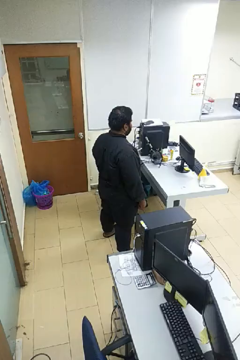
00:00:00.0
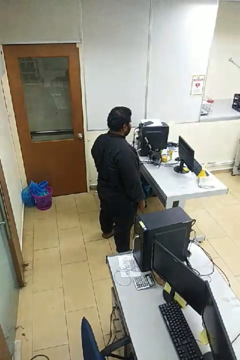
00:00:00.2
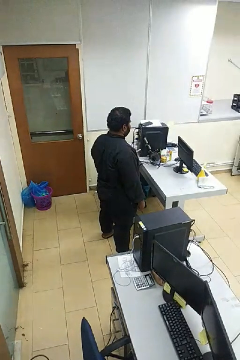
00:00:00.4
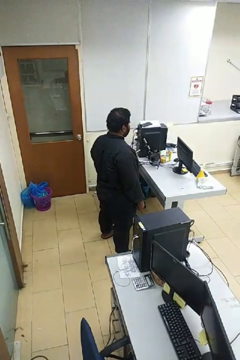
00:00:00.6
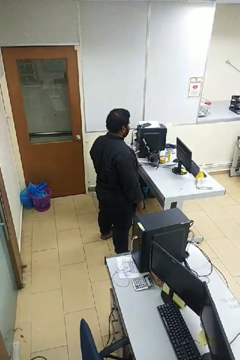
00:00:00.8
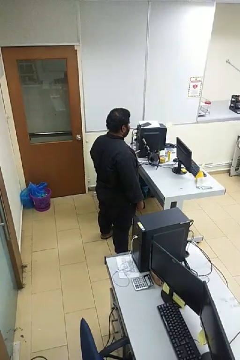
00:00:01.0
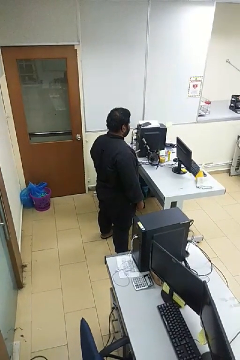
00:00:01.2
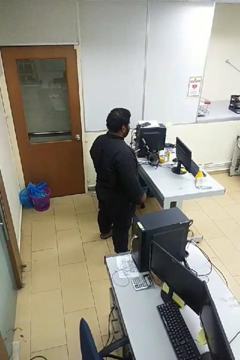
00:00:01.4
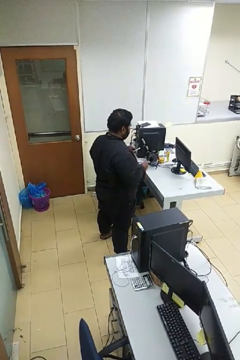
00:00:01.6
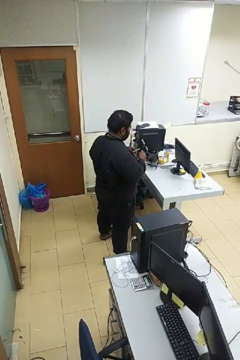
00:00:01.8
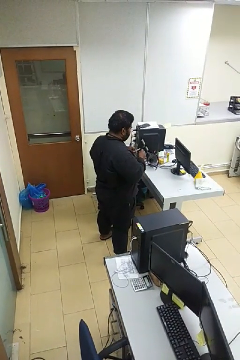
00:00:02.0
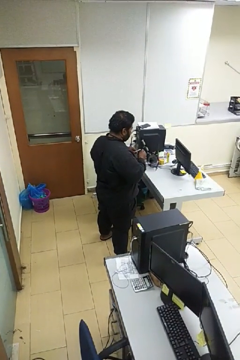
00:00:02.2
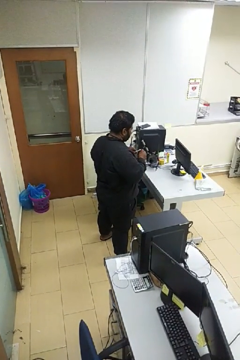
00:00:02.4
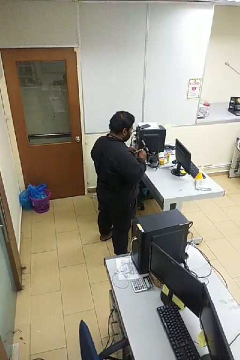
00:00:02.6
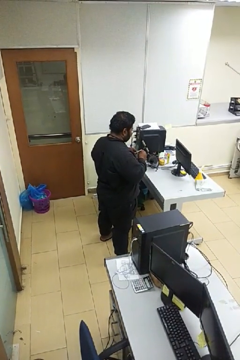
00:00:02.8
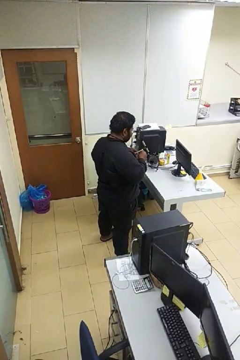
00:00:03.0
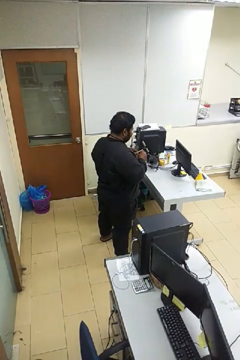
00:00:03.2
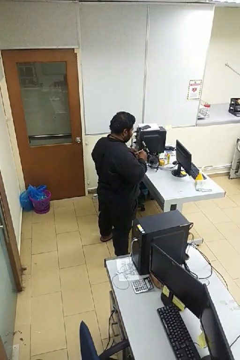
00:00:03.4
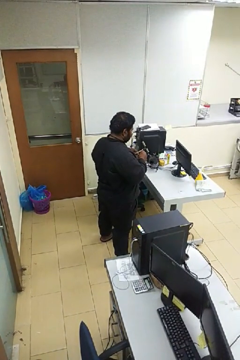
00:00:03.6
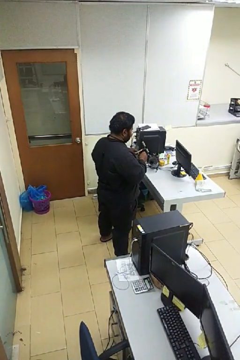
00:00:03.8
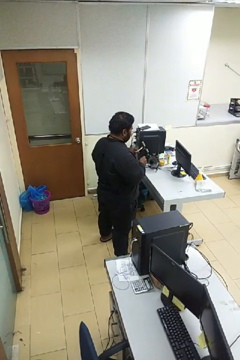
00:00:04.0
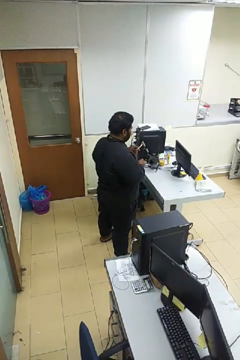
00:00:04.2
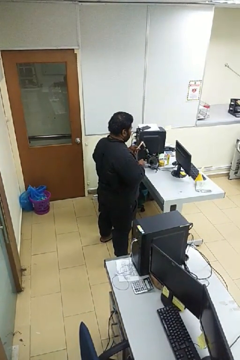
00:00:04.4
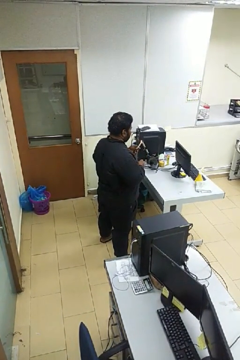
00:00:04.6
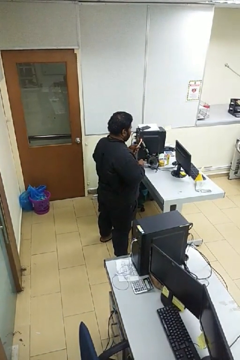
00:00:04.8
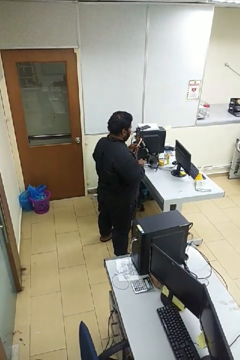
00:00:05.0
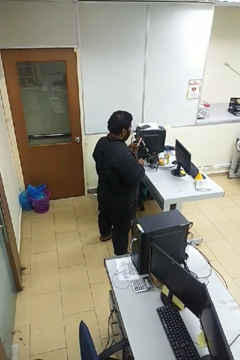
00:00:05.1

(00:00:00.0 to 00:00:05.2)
person lights candle

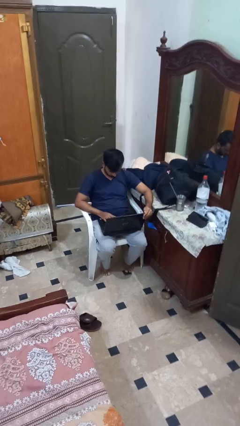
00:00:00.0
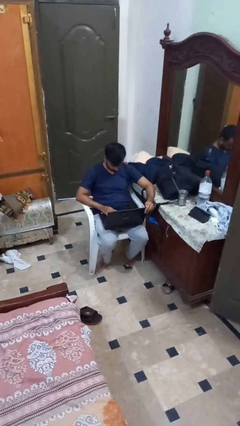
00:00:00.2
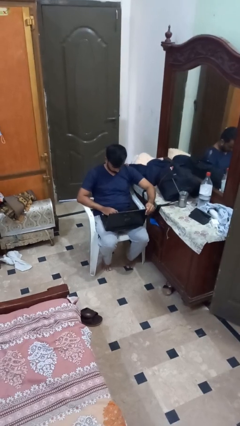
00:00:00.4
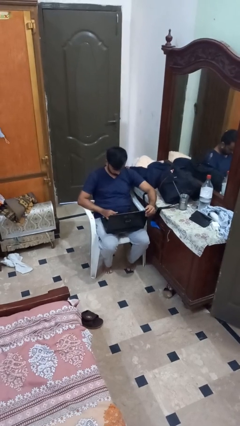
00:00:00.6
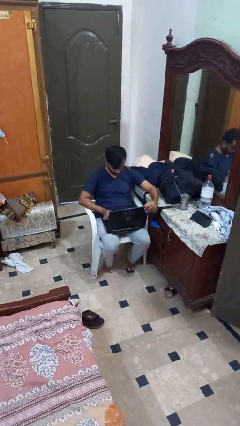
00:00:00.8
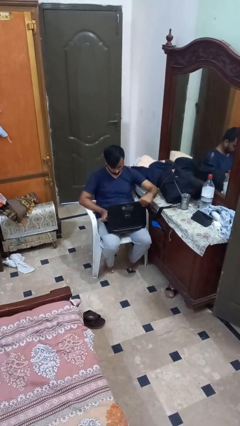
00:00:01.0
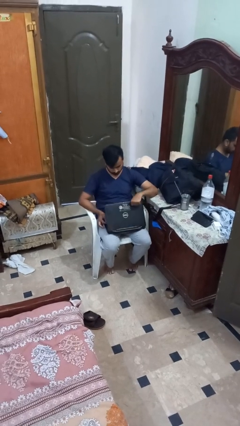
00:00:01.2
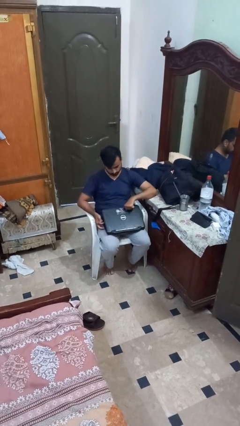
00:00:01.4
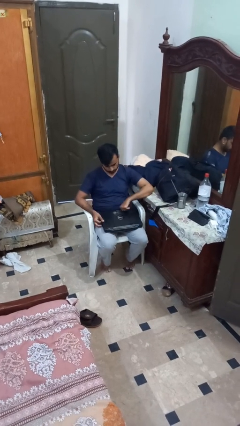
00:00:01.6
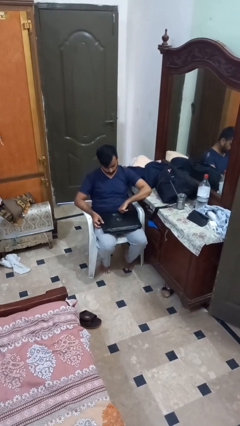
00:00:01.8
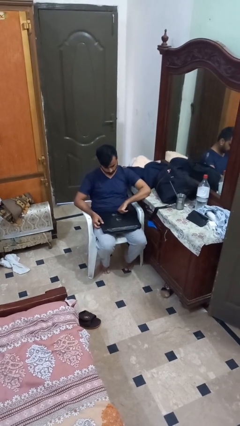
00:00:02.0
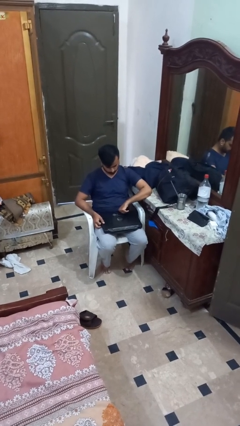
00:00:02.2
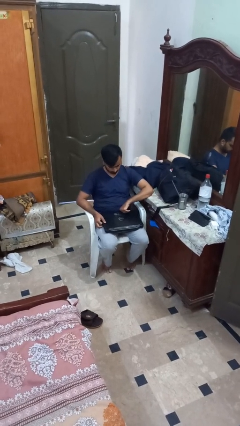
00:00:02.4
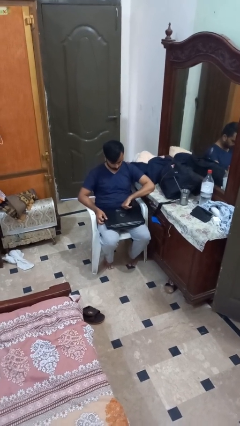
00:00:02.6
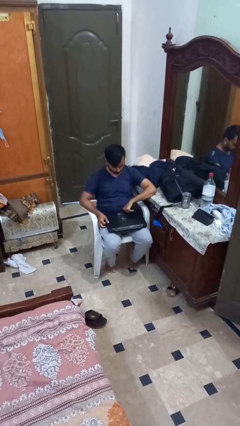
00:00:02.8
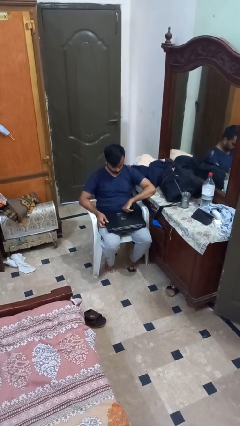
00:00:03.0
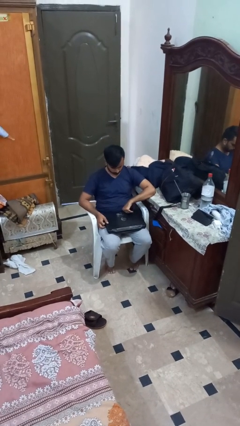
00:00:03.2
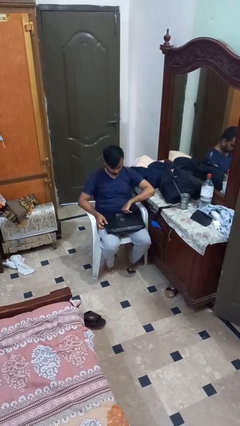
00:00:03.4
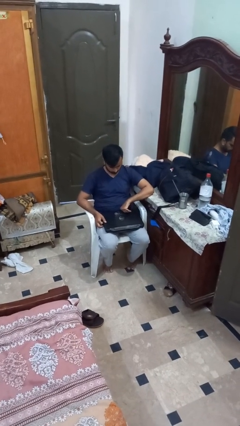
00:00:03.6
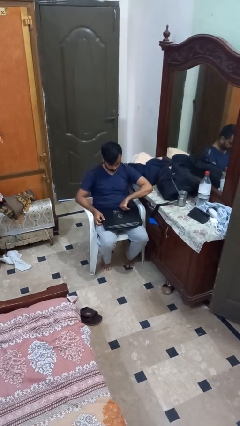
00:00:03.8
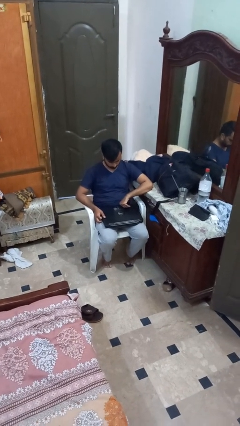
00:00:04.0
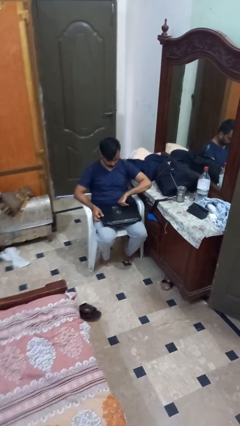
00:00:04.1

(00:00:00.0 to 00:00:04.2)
person closes laptop

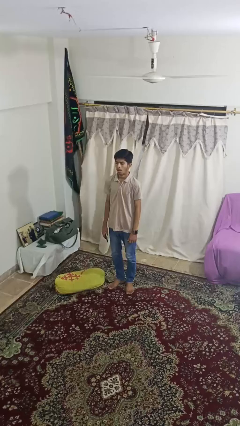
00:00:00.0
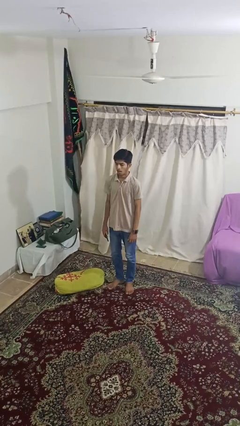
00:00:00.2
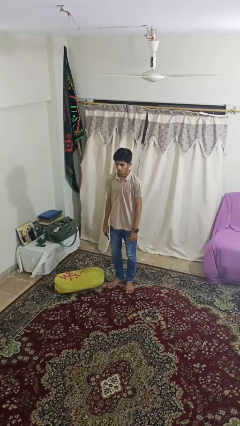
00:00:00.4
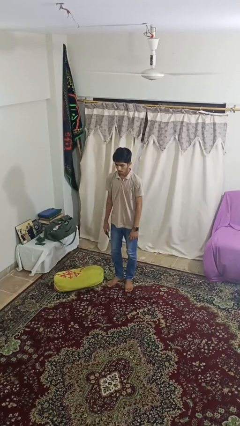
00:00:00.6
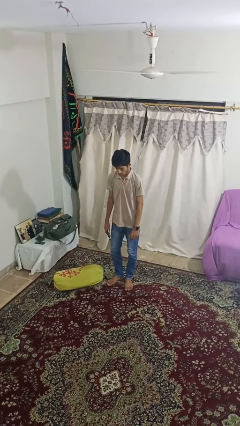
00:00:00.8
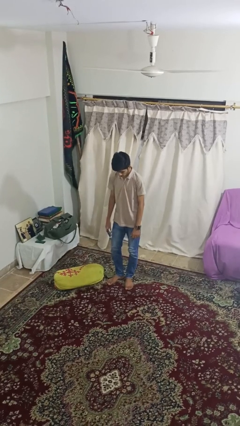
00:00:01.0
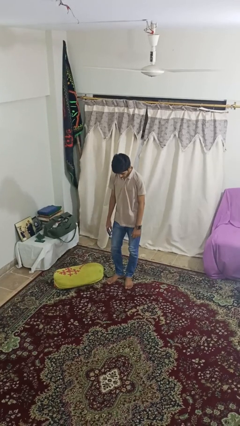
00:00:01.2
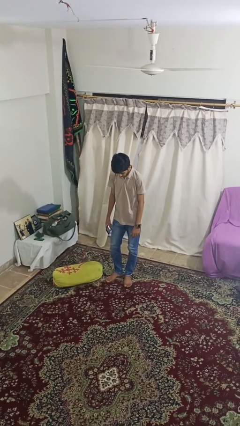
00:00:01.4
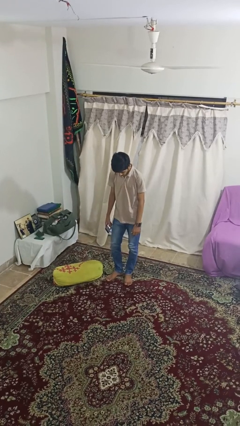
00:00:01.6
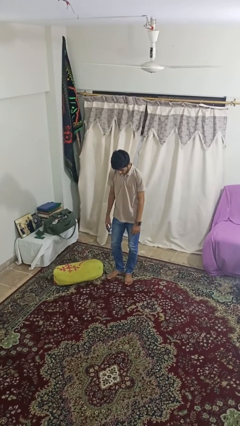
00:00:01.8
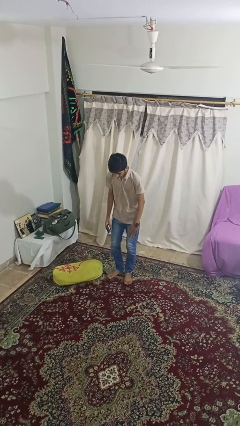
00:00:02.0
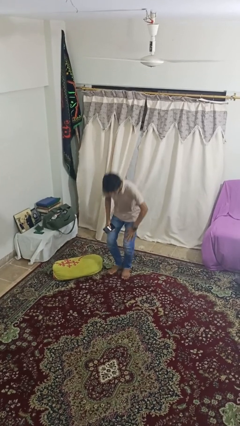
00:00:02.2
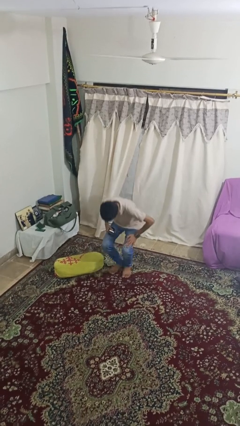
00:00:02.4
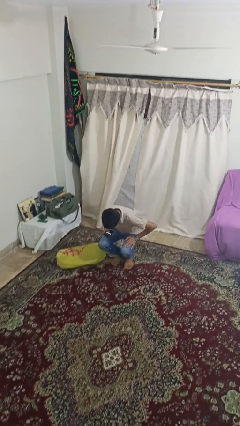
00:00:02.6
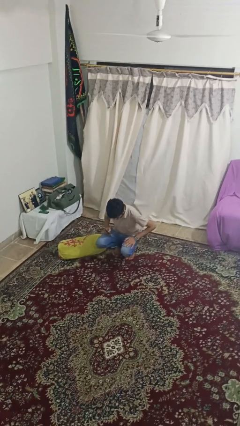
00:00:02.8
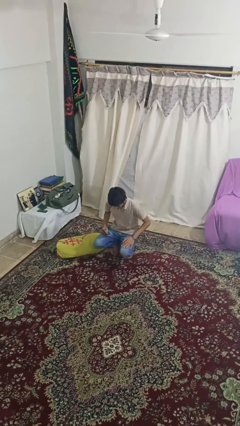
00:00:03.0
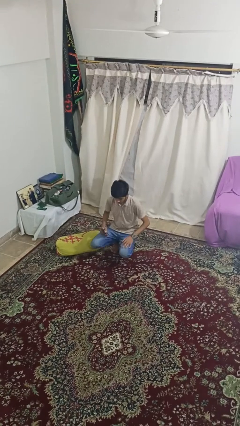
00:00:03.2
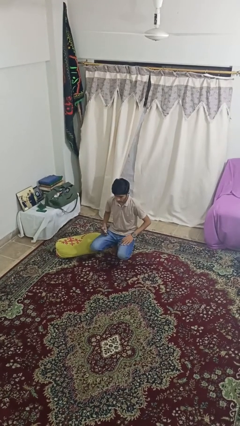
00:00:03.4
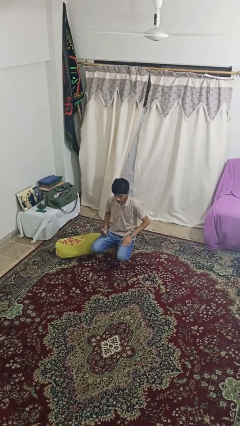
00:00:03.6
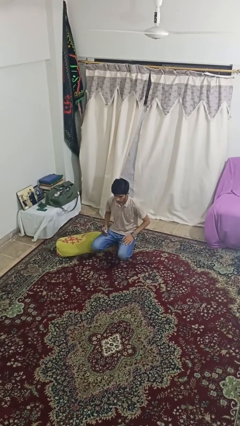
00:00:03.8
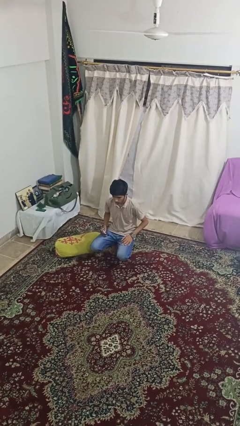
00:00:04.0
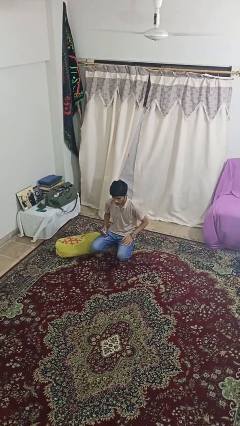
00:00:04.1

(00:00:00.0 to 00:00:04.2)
person squats

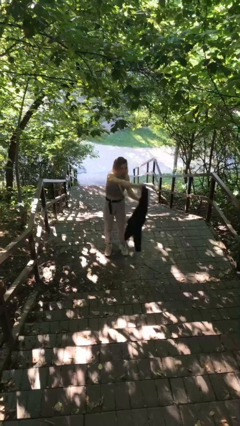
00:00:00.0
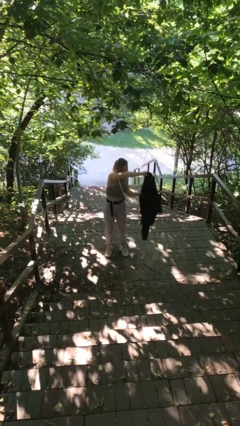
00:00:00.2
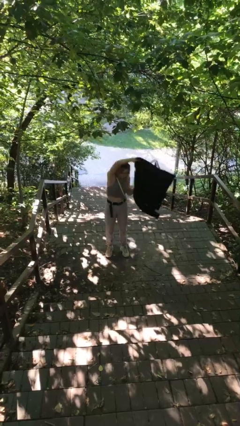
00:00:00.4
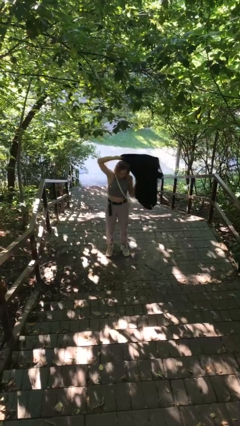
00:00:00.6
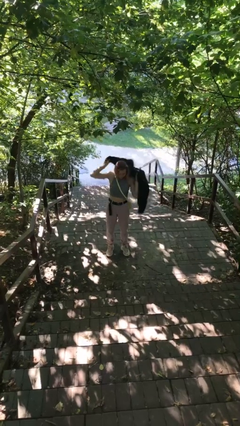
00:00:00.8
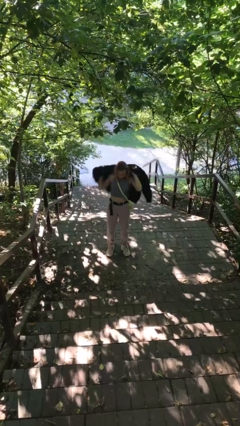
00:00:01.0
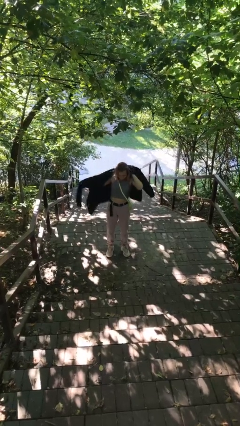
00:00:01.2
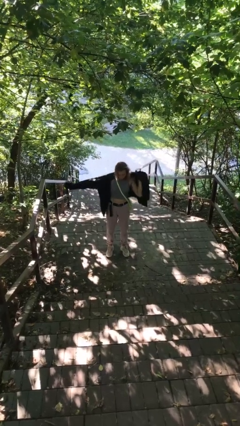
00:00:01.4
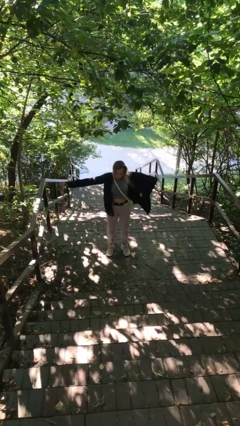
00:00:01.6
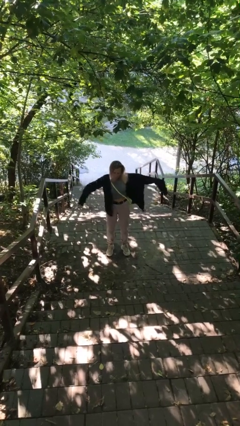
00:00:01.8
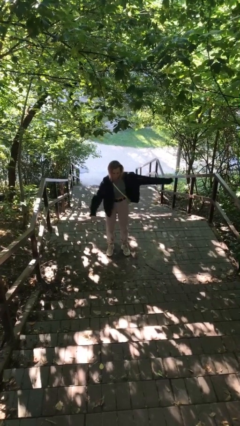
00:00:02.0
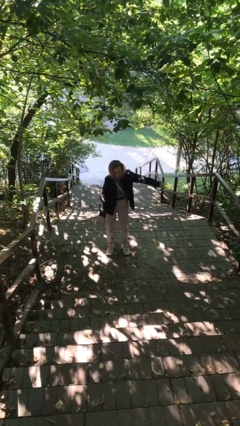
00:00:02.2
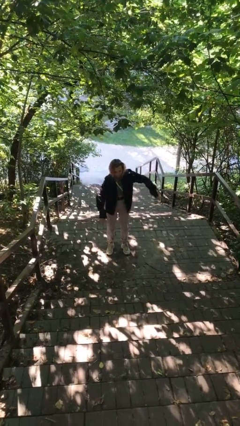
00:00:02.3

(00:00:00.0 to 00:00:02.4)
person puts on jacket

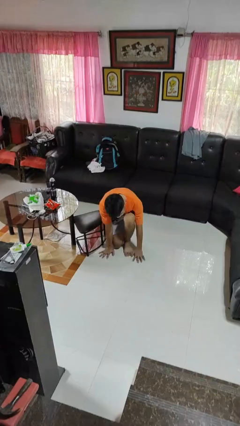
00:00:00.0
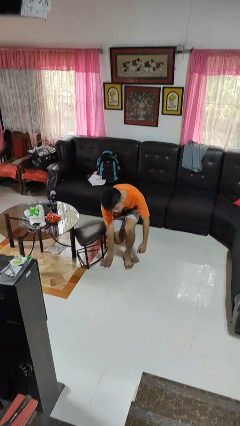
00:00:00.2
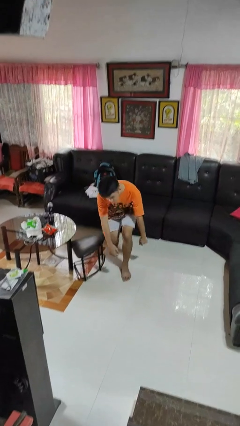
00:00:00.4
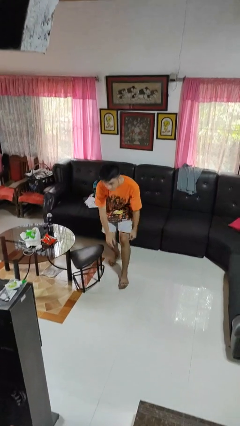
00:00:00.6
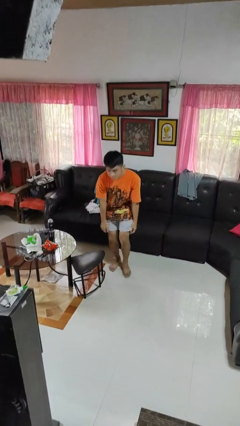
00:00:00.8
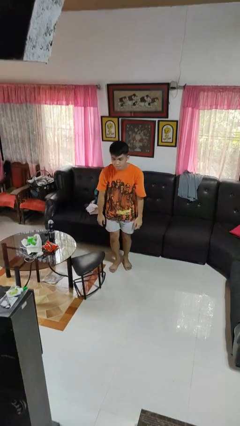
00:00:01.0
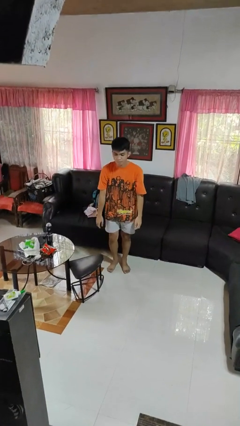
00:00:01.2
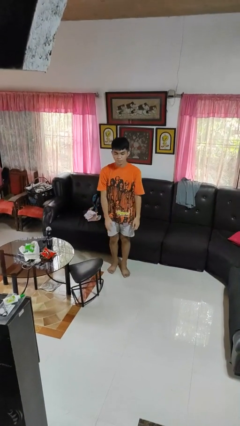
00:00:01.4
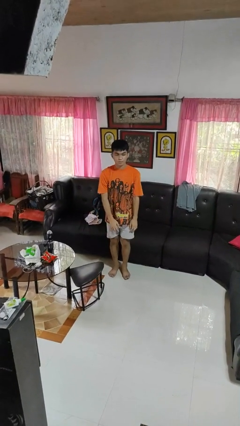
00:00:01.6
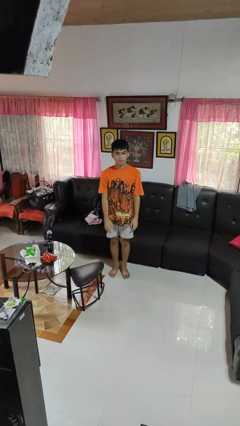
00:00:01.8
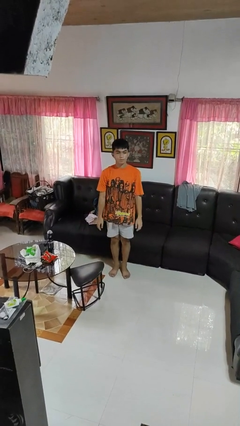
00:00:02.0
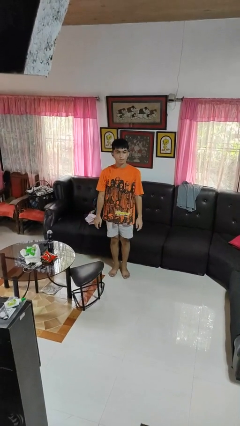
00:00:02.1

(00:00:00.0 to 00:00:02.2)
person stands up from floor

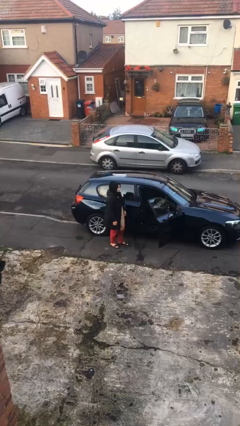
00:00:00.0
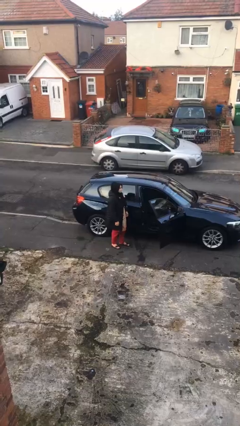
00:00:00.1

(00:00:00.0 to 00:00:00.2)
person enters car
